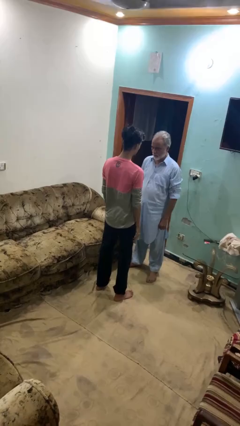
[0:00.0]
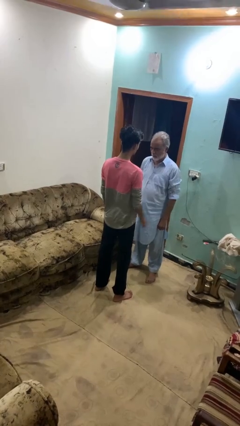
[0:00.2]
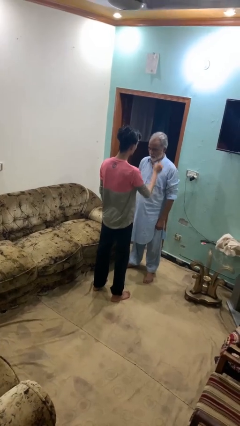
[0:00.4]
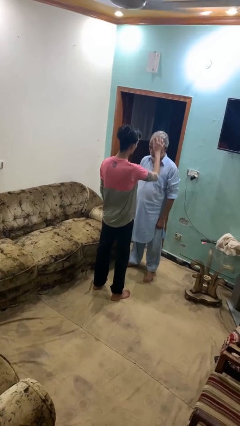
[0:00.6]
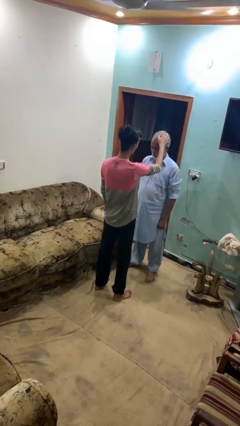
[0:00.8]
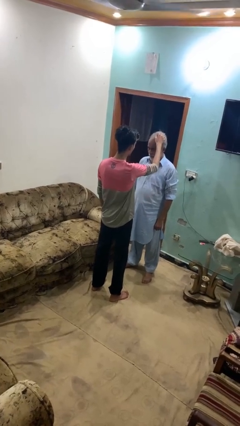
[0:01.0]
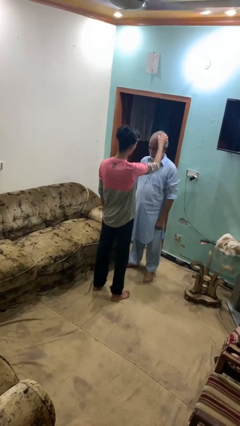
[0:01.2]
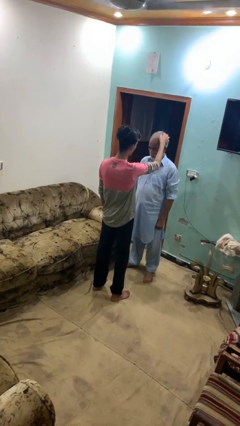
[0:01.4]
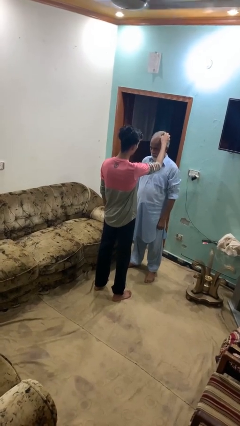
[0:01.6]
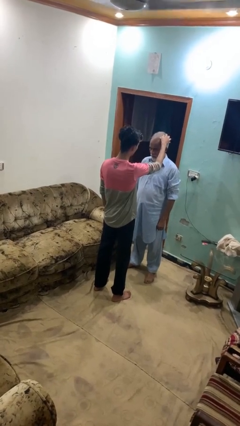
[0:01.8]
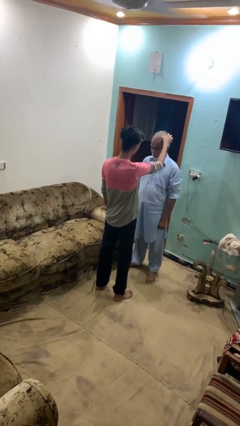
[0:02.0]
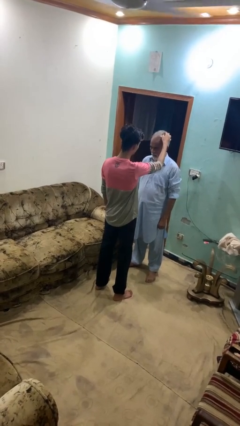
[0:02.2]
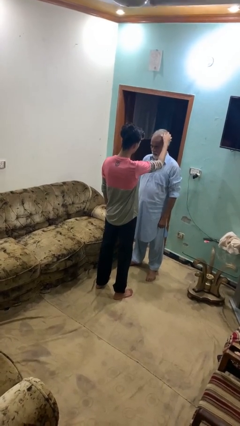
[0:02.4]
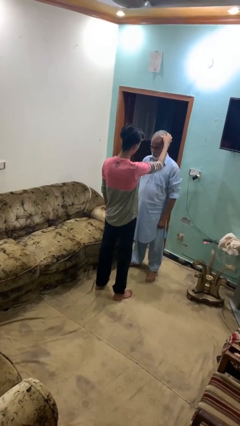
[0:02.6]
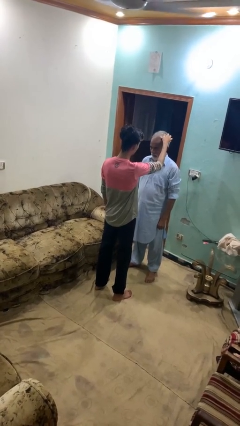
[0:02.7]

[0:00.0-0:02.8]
person grabs person by hair

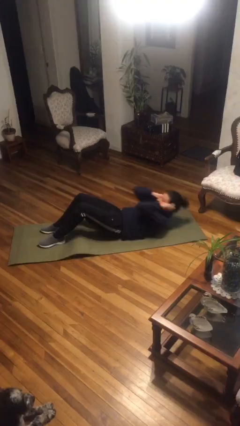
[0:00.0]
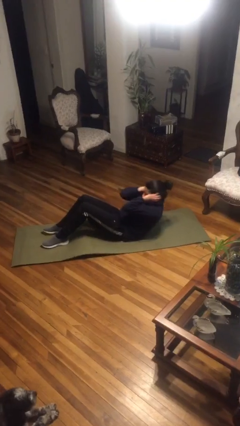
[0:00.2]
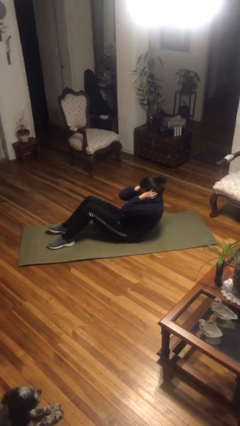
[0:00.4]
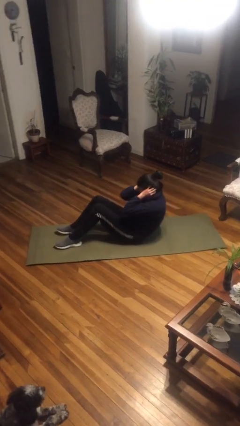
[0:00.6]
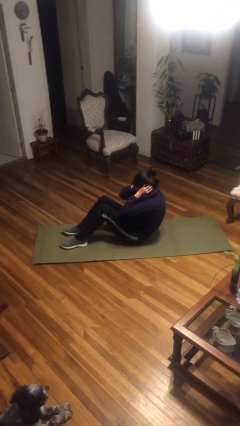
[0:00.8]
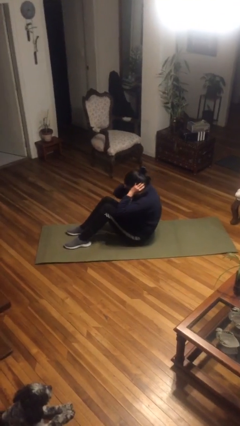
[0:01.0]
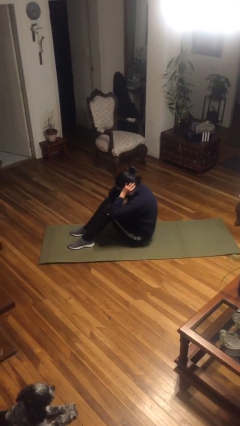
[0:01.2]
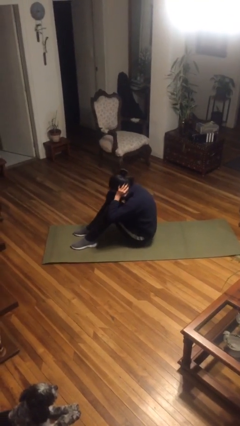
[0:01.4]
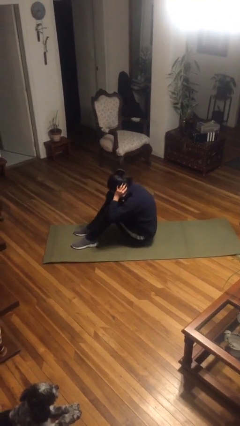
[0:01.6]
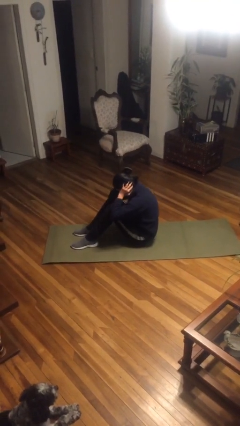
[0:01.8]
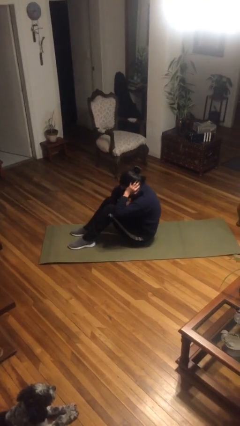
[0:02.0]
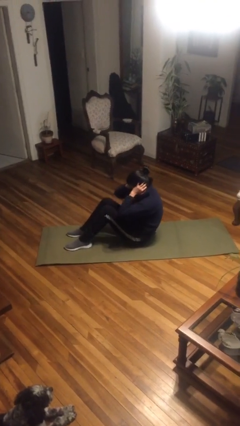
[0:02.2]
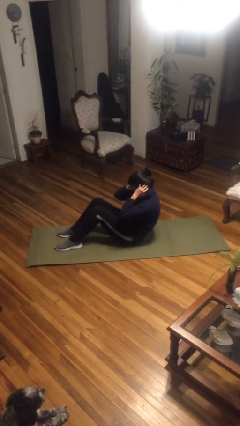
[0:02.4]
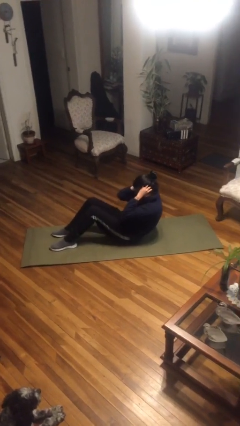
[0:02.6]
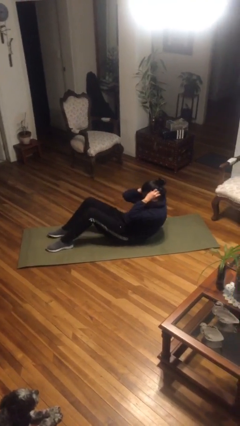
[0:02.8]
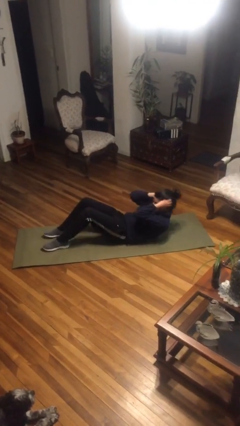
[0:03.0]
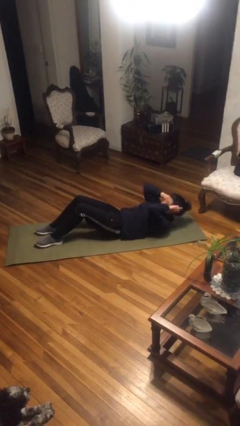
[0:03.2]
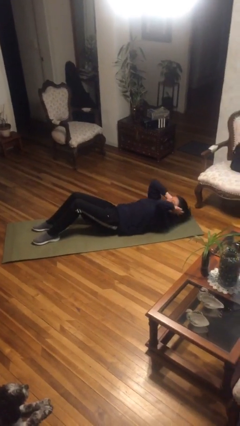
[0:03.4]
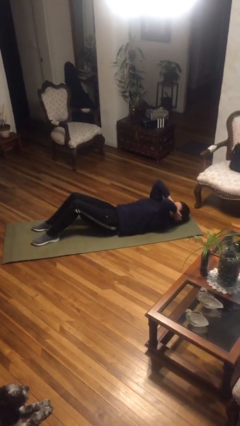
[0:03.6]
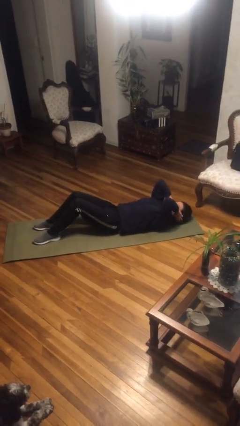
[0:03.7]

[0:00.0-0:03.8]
person exercises with situp

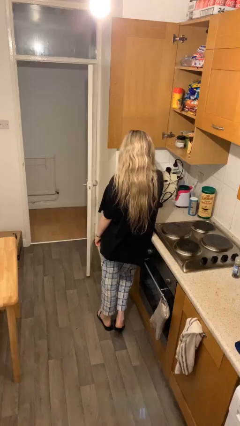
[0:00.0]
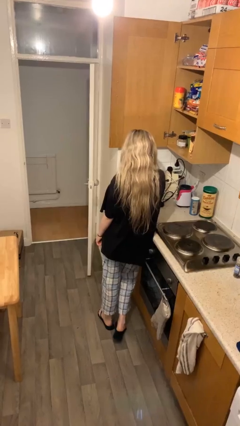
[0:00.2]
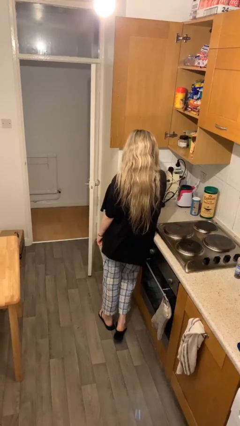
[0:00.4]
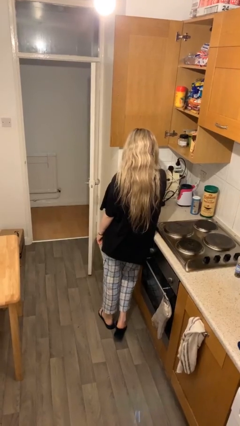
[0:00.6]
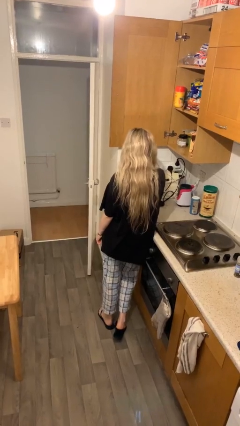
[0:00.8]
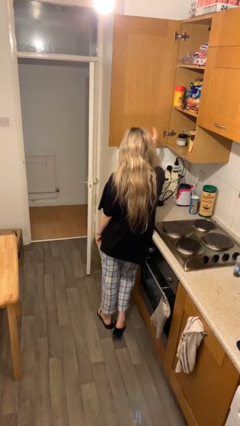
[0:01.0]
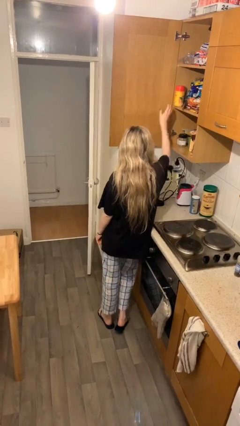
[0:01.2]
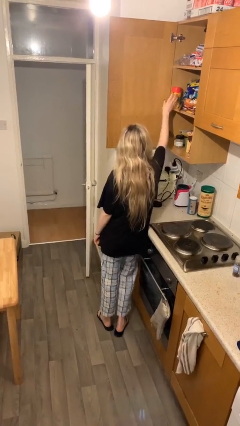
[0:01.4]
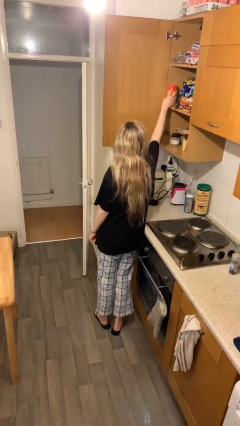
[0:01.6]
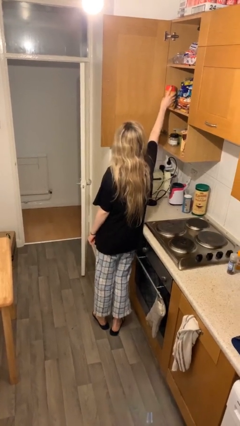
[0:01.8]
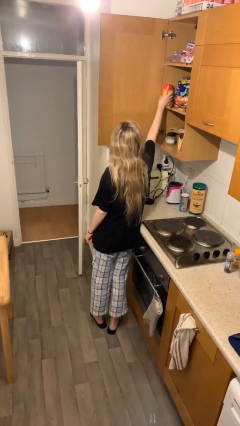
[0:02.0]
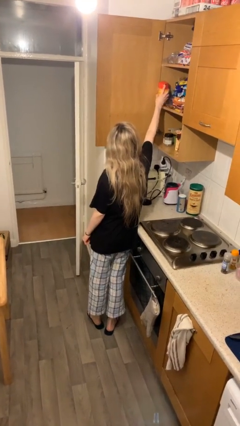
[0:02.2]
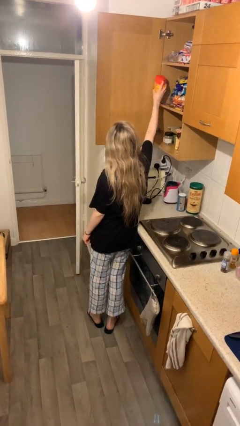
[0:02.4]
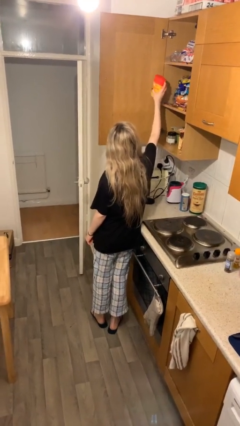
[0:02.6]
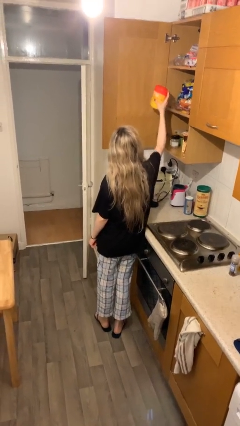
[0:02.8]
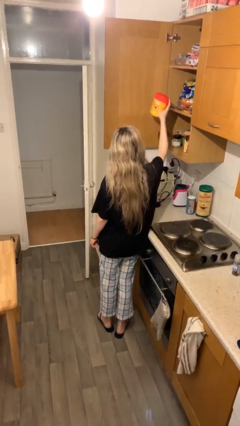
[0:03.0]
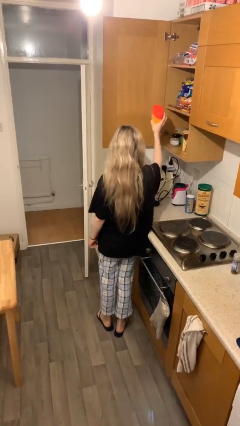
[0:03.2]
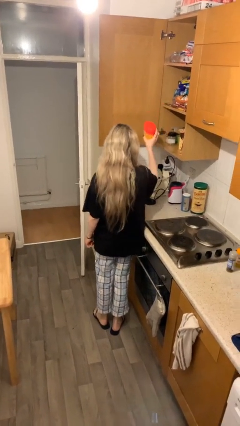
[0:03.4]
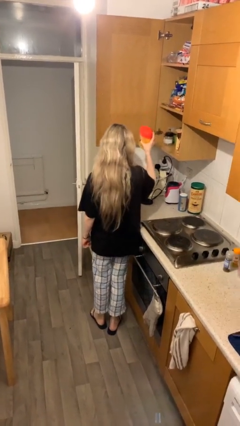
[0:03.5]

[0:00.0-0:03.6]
person picks up object from shelf

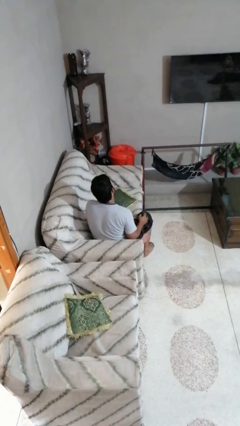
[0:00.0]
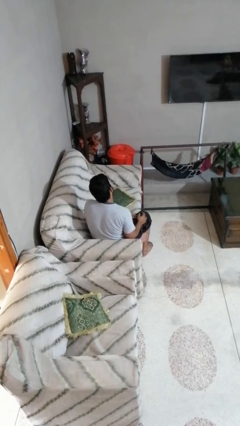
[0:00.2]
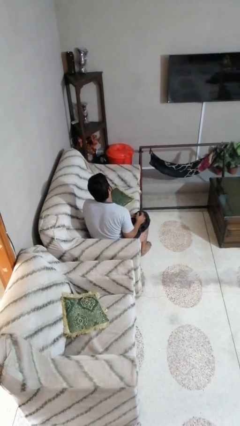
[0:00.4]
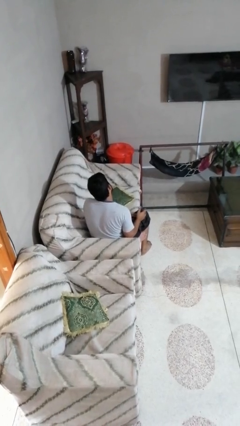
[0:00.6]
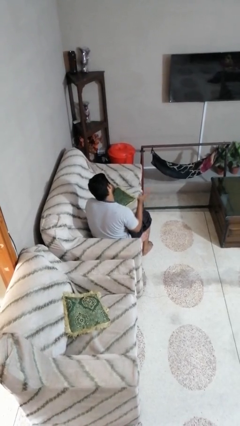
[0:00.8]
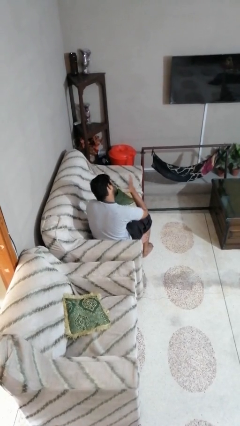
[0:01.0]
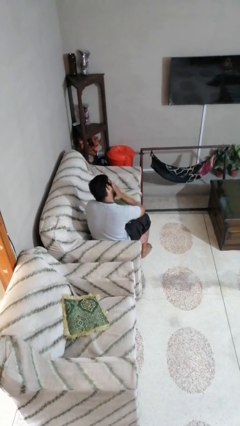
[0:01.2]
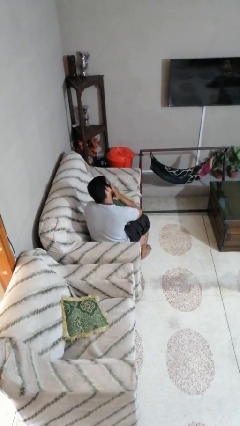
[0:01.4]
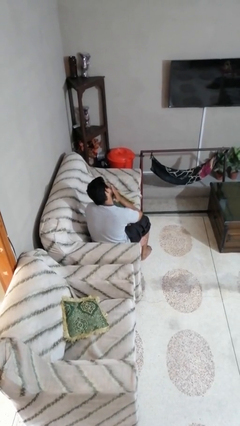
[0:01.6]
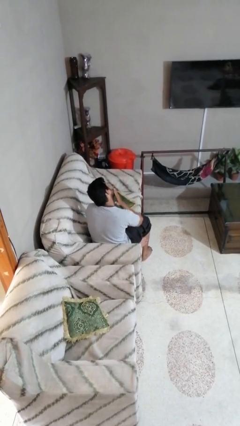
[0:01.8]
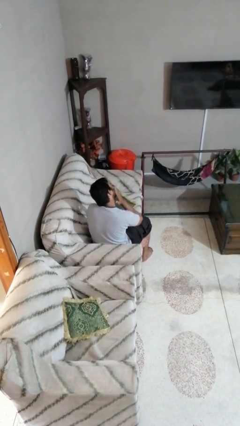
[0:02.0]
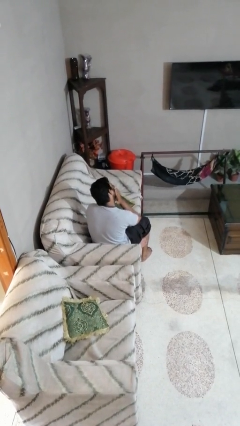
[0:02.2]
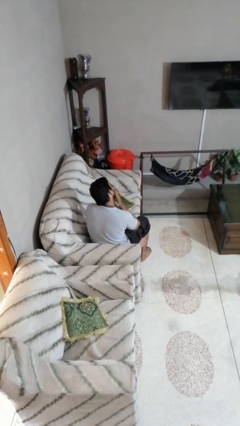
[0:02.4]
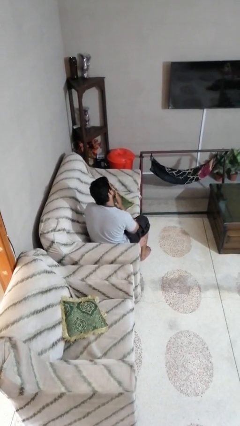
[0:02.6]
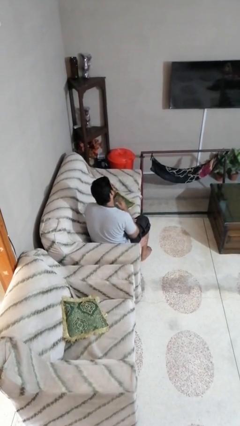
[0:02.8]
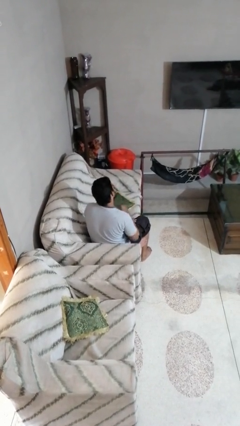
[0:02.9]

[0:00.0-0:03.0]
person swats bug

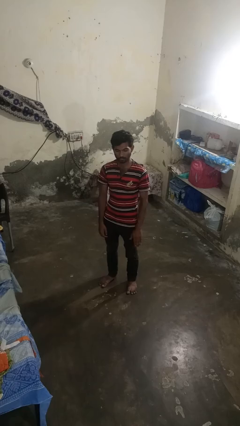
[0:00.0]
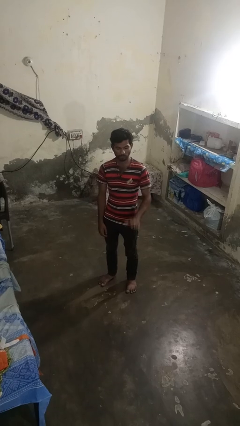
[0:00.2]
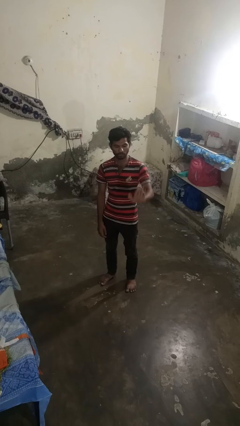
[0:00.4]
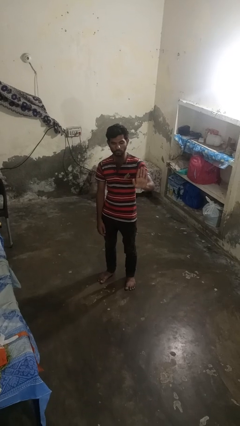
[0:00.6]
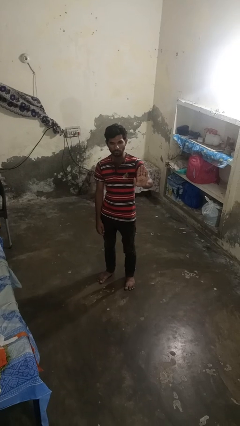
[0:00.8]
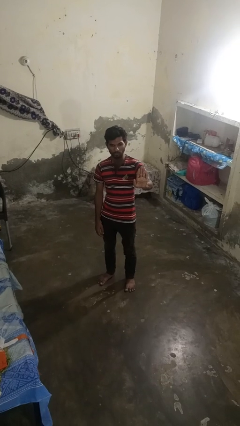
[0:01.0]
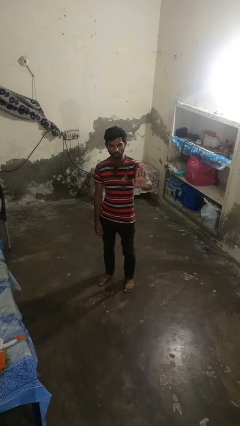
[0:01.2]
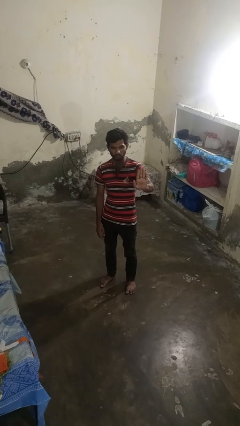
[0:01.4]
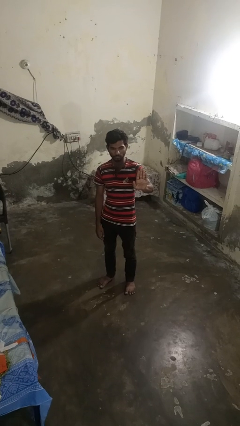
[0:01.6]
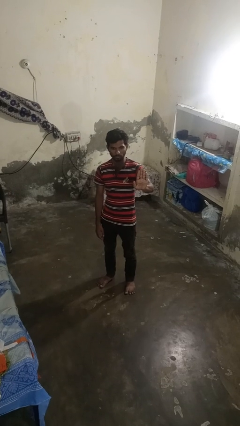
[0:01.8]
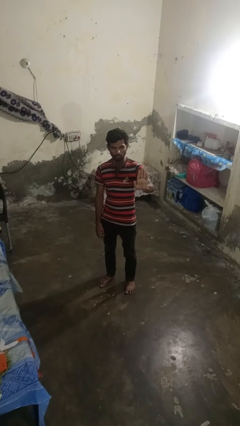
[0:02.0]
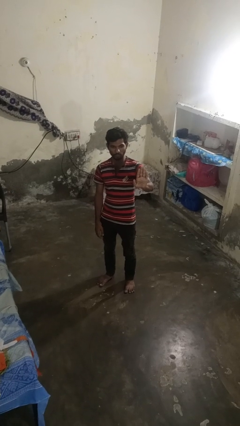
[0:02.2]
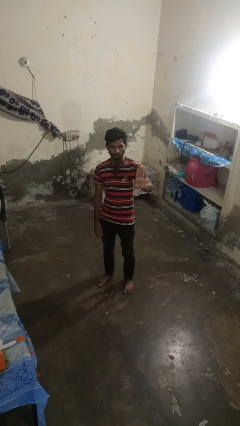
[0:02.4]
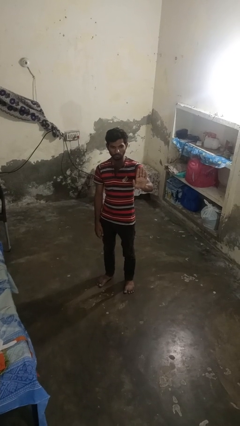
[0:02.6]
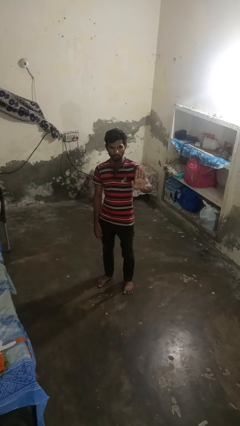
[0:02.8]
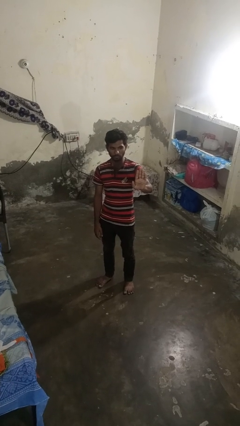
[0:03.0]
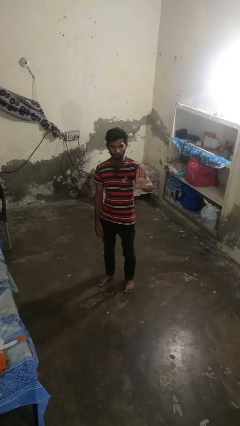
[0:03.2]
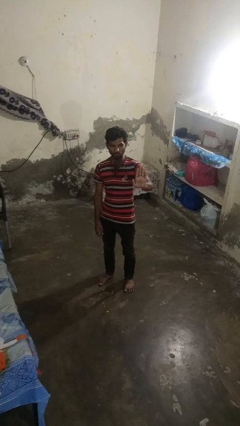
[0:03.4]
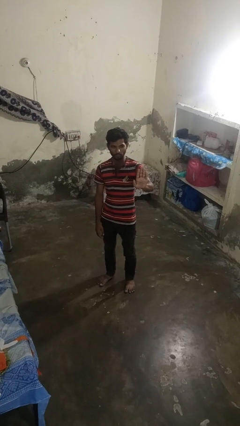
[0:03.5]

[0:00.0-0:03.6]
person gestures stop

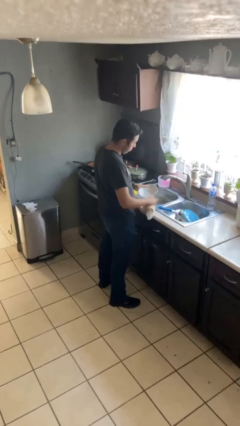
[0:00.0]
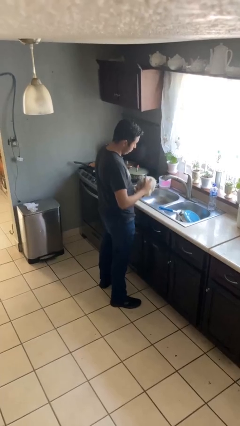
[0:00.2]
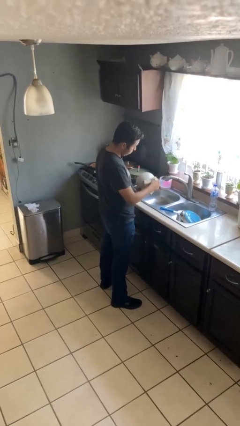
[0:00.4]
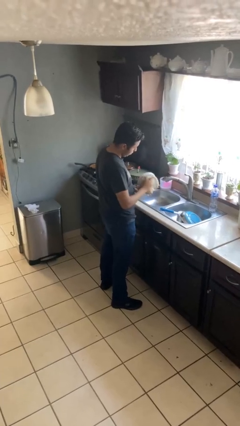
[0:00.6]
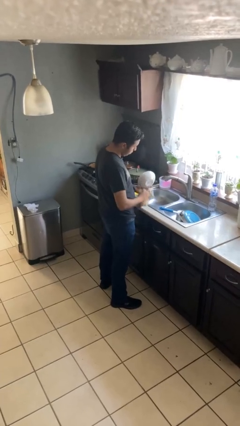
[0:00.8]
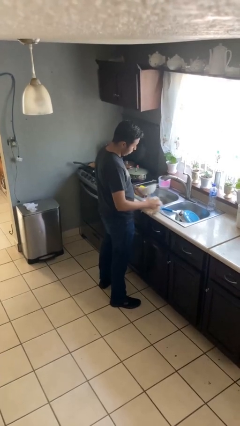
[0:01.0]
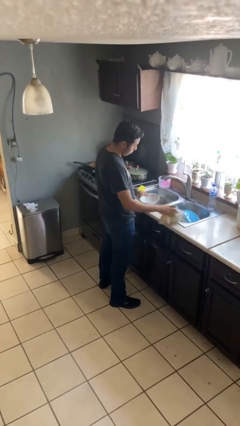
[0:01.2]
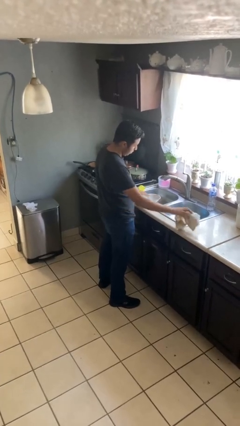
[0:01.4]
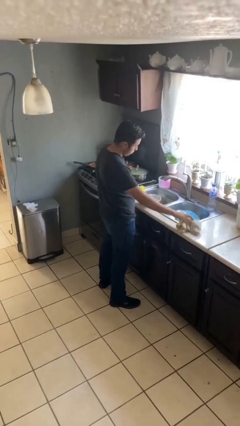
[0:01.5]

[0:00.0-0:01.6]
person dries dish
